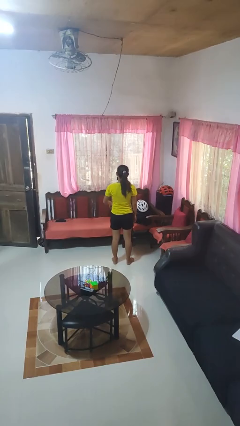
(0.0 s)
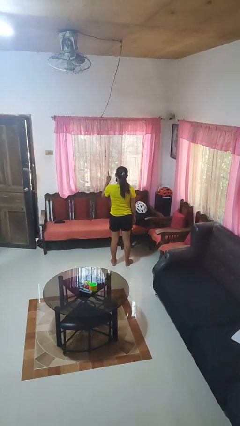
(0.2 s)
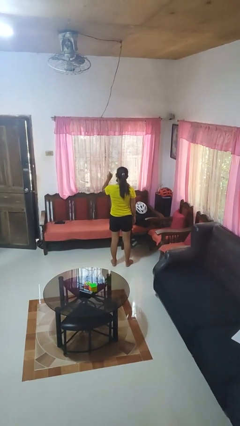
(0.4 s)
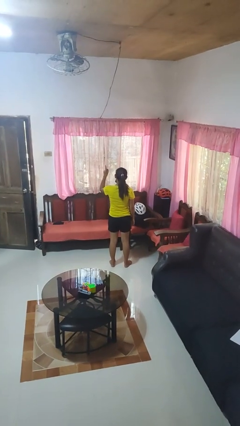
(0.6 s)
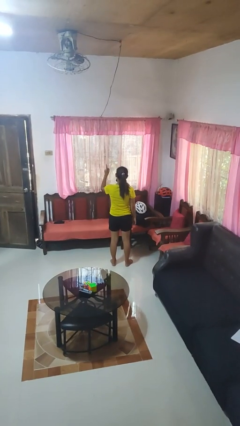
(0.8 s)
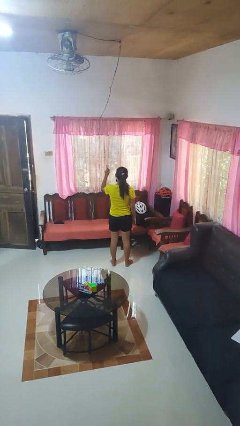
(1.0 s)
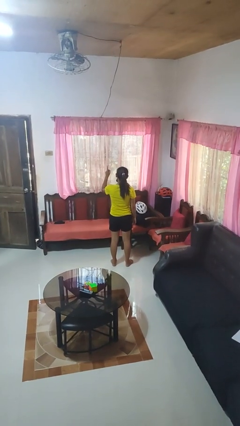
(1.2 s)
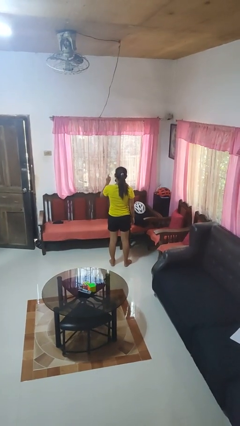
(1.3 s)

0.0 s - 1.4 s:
person gestures number one

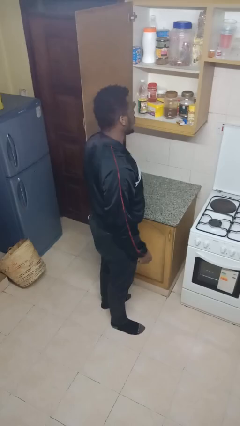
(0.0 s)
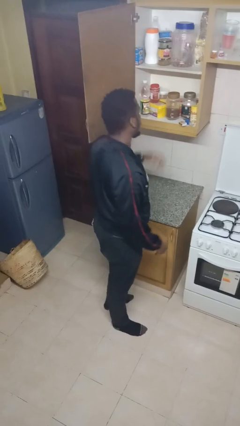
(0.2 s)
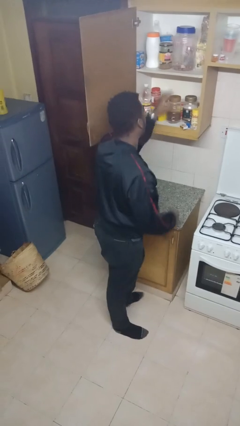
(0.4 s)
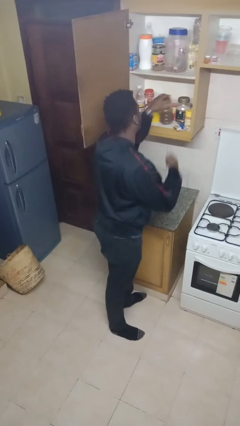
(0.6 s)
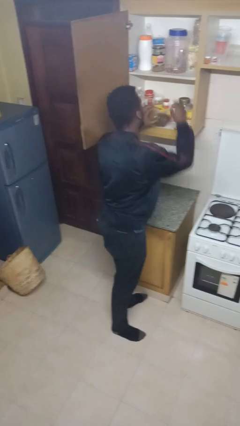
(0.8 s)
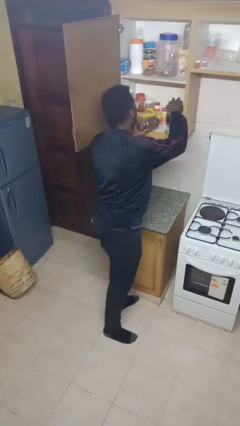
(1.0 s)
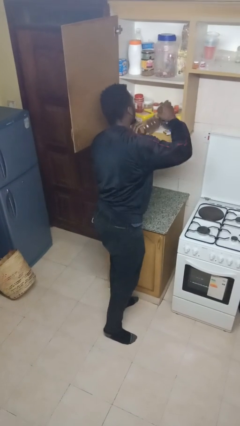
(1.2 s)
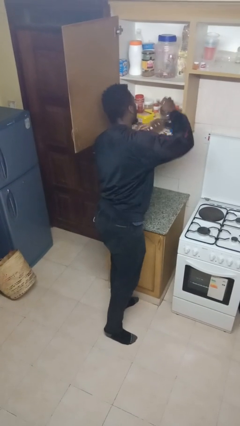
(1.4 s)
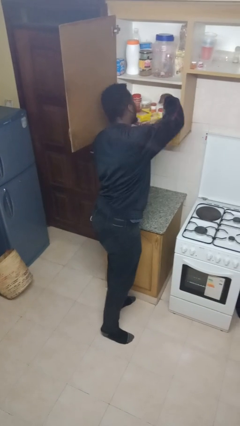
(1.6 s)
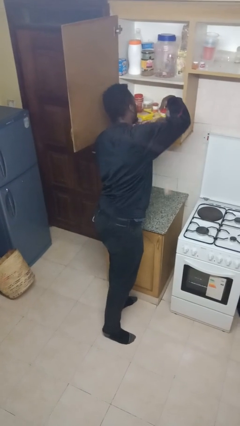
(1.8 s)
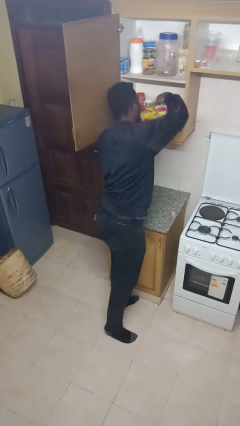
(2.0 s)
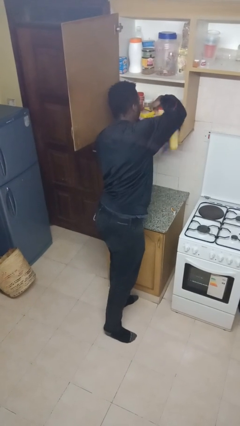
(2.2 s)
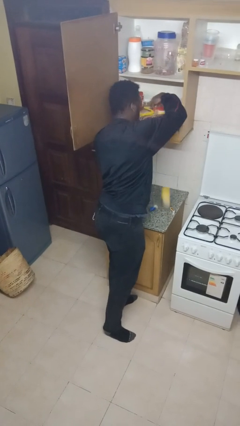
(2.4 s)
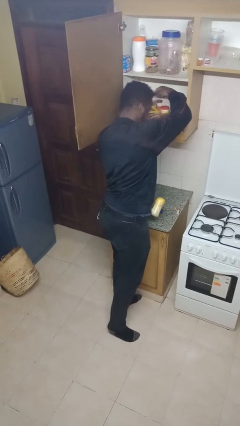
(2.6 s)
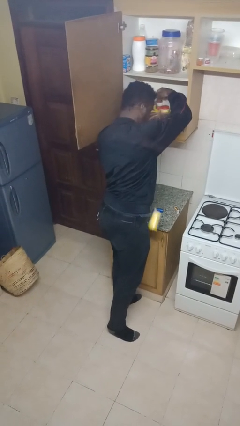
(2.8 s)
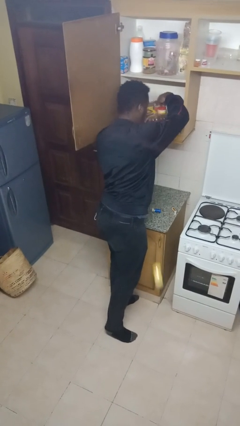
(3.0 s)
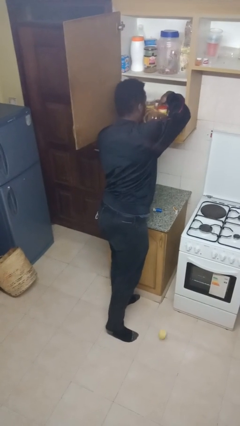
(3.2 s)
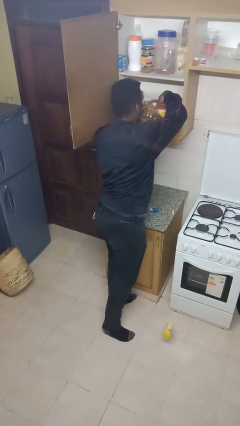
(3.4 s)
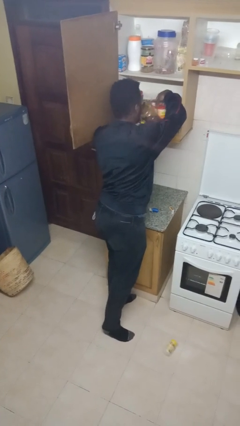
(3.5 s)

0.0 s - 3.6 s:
person searches in cabinet

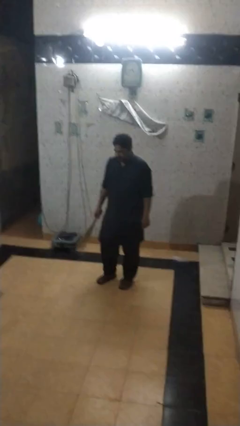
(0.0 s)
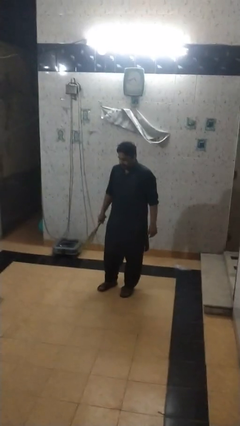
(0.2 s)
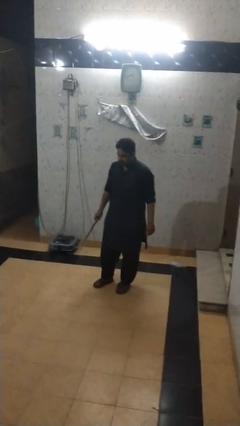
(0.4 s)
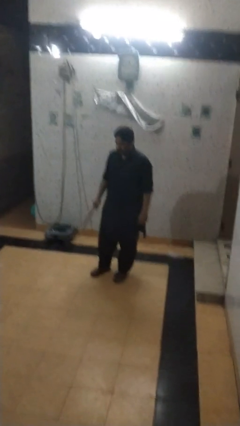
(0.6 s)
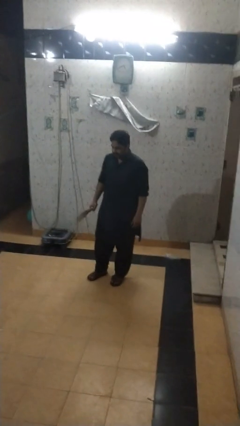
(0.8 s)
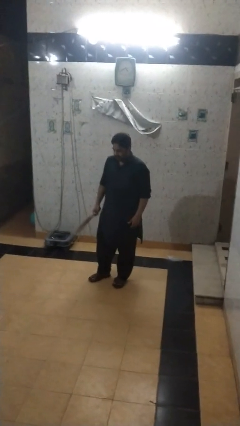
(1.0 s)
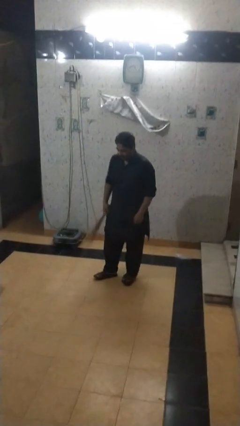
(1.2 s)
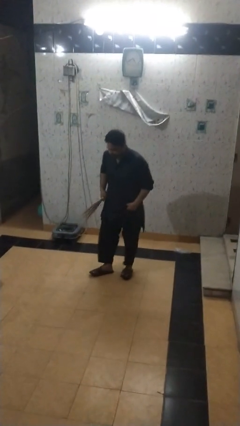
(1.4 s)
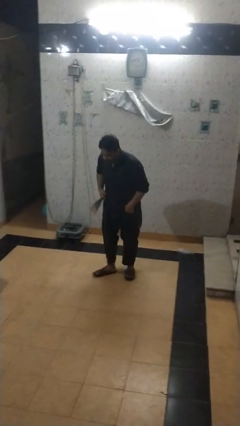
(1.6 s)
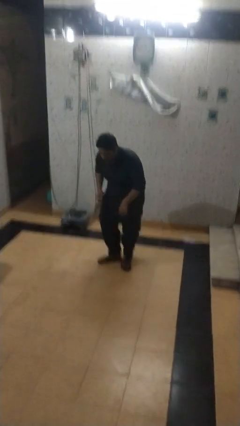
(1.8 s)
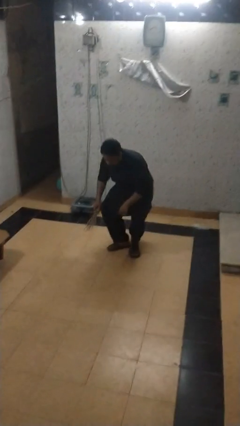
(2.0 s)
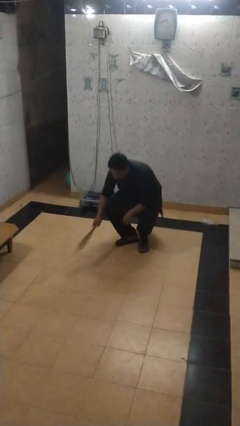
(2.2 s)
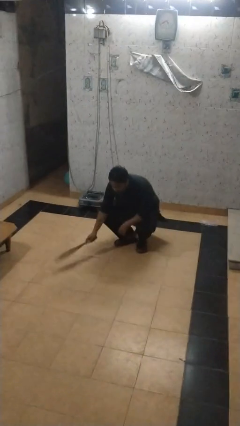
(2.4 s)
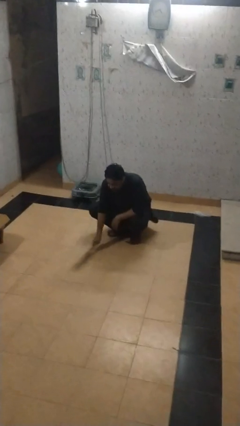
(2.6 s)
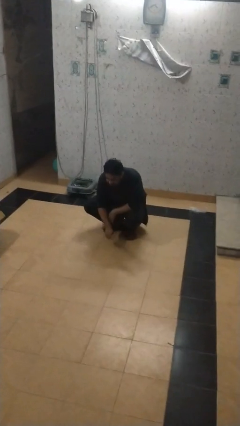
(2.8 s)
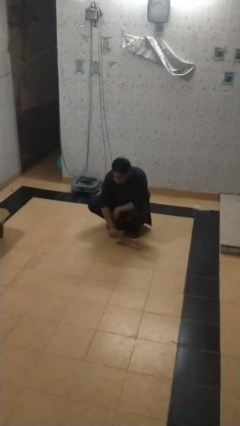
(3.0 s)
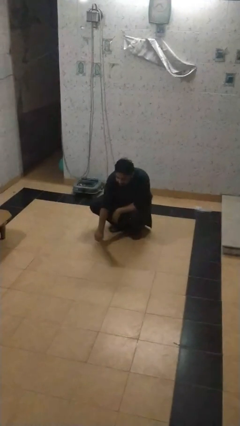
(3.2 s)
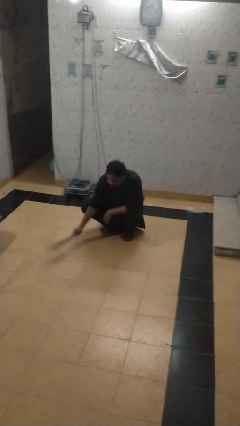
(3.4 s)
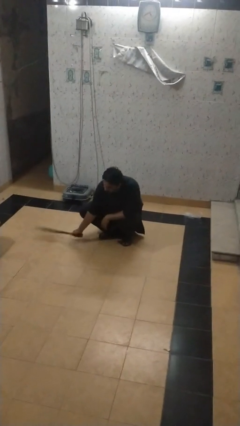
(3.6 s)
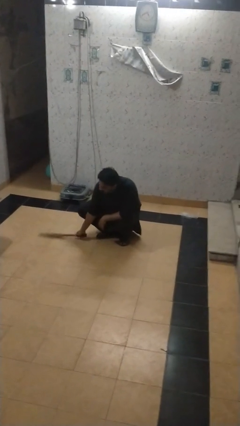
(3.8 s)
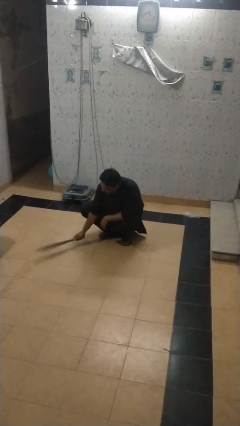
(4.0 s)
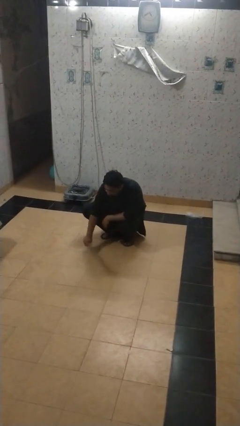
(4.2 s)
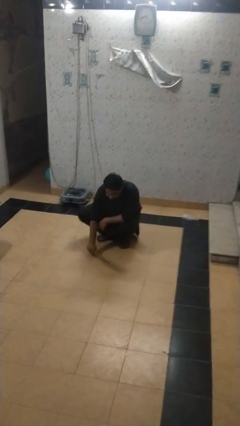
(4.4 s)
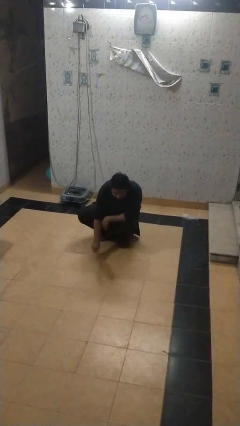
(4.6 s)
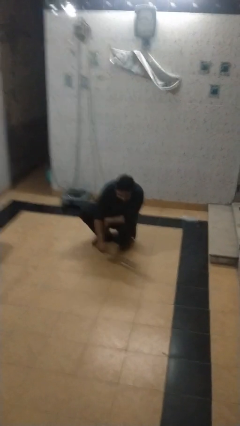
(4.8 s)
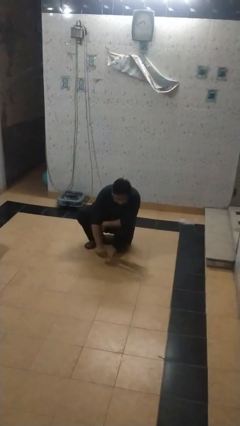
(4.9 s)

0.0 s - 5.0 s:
person sweeps floor

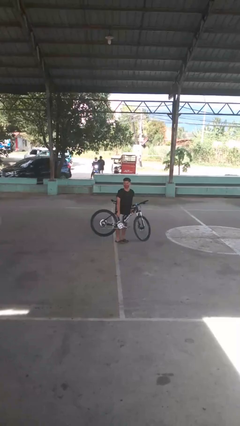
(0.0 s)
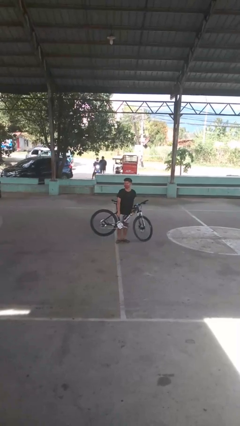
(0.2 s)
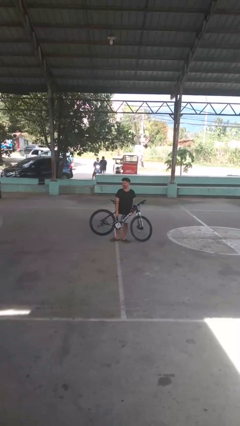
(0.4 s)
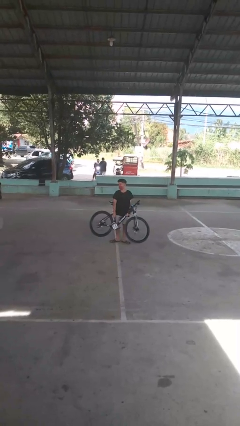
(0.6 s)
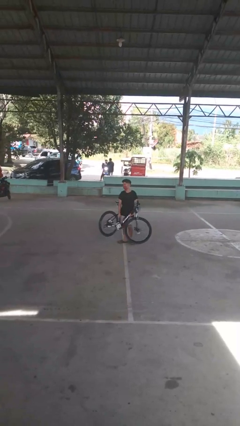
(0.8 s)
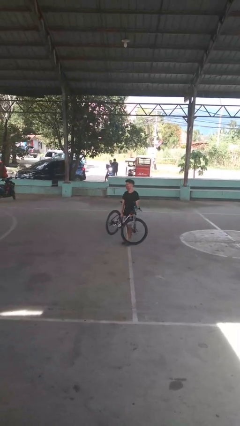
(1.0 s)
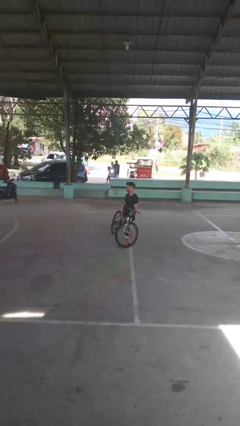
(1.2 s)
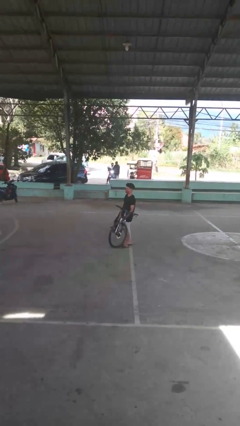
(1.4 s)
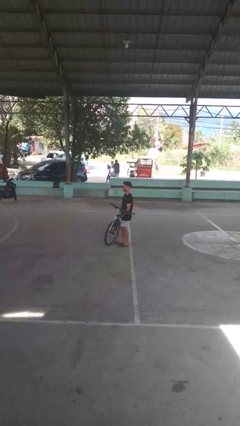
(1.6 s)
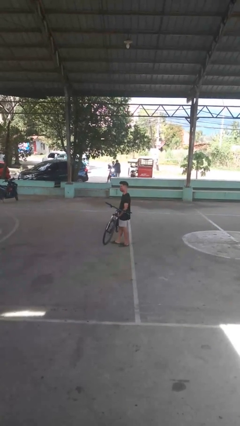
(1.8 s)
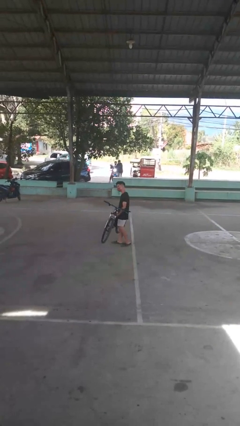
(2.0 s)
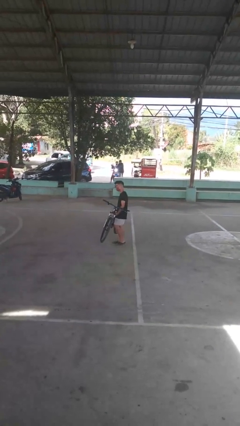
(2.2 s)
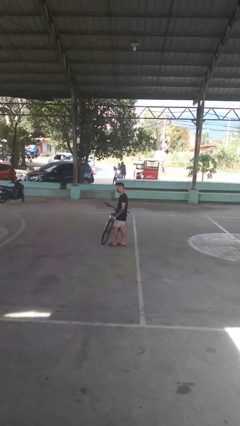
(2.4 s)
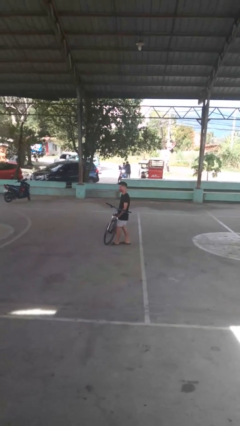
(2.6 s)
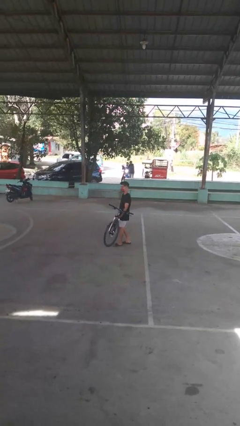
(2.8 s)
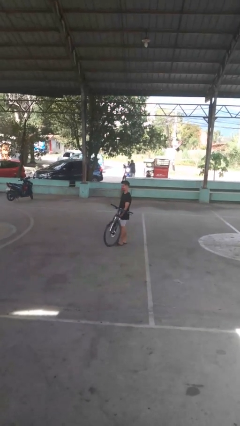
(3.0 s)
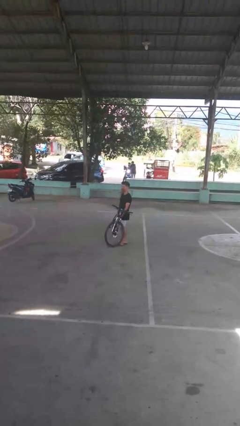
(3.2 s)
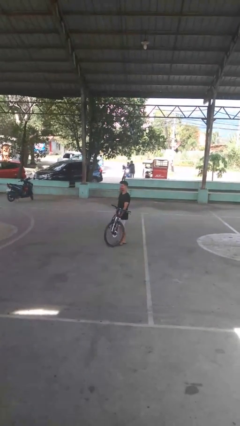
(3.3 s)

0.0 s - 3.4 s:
person carries bicycle

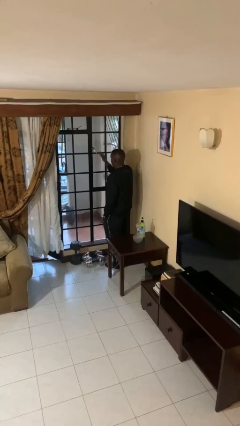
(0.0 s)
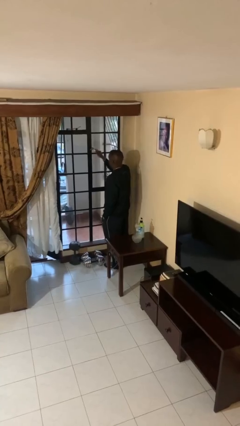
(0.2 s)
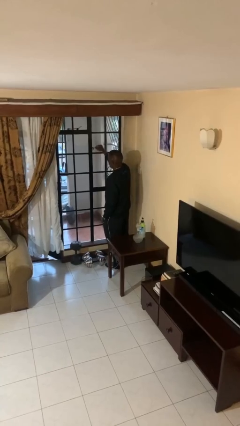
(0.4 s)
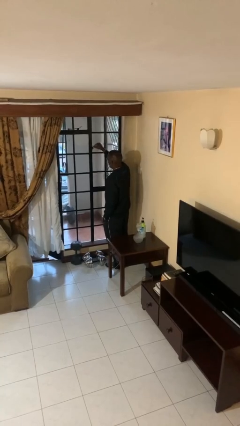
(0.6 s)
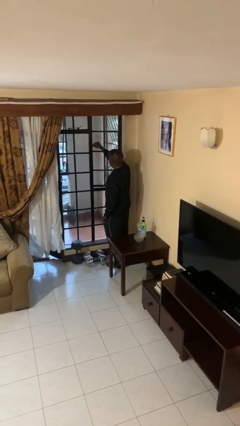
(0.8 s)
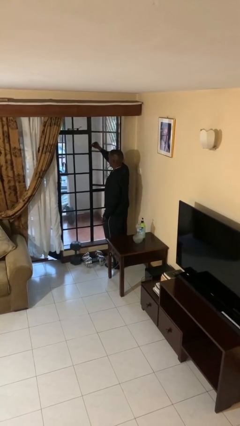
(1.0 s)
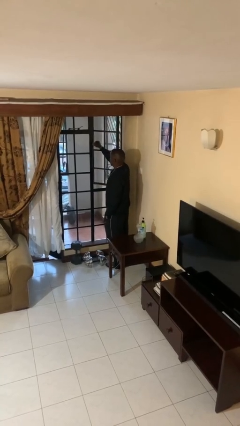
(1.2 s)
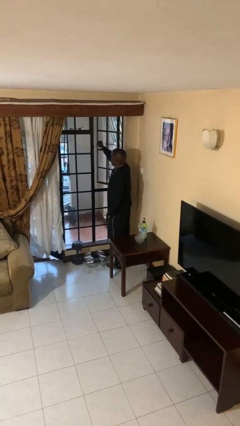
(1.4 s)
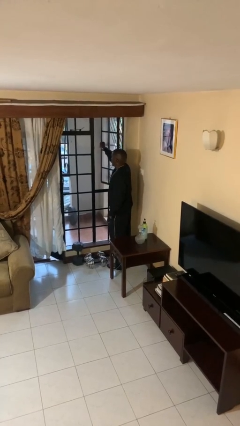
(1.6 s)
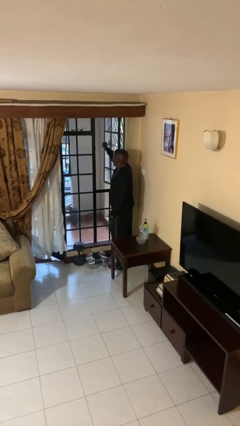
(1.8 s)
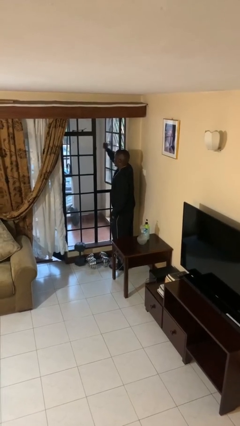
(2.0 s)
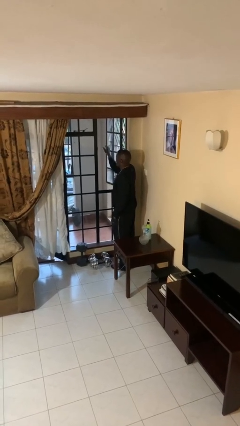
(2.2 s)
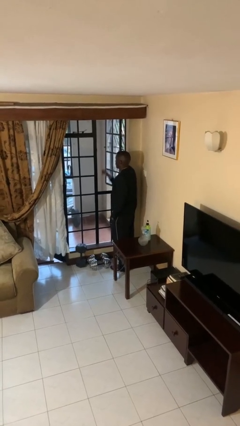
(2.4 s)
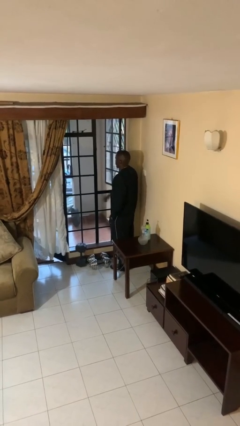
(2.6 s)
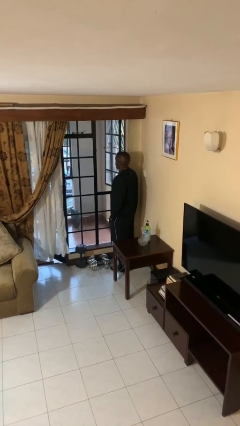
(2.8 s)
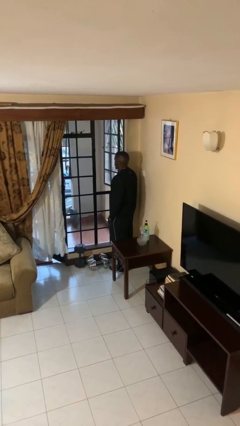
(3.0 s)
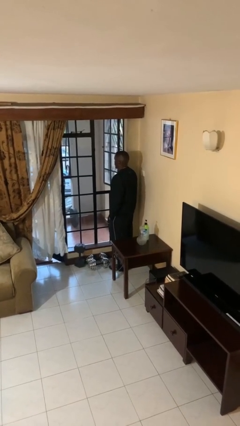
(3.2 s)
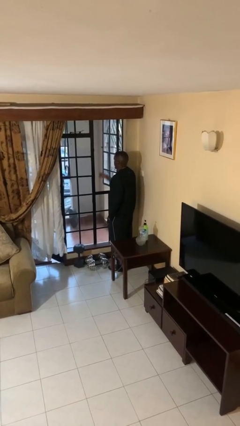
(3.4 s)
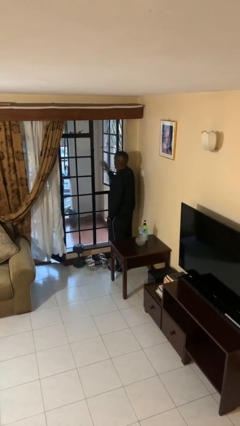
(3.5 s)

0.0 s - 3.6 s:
person opens home window

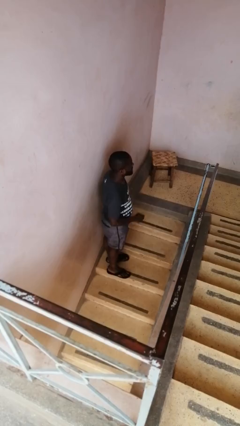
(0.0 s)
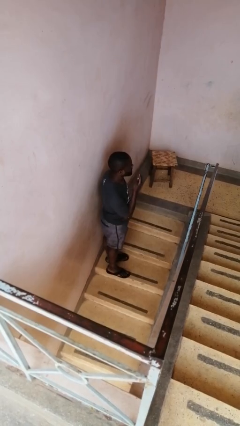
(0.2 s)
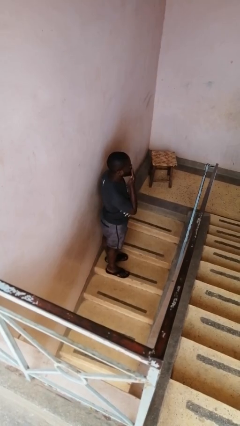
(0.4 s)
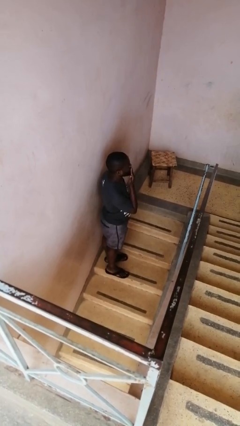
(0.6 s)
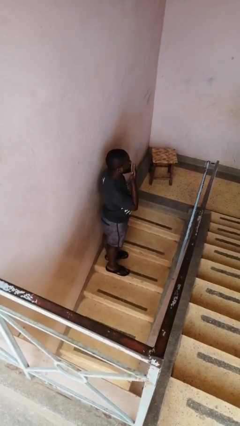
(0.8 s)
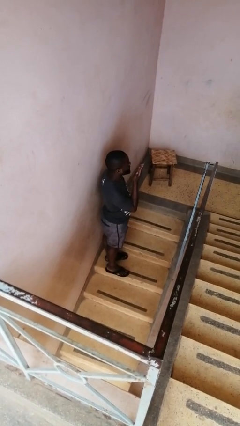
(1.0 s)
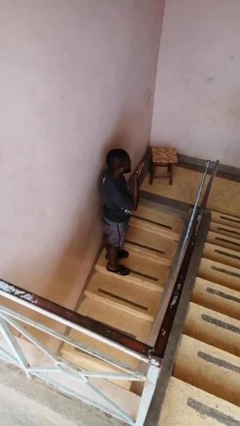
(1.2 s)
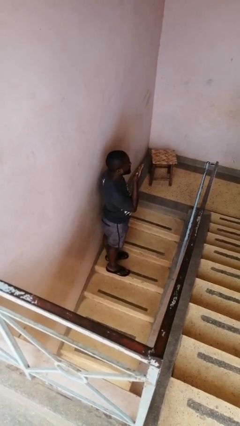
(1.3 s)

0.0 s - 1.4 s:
person gestures blow kiss
